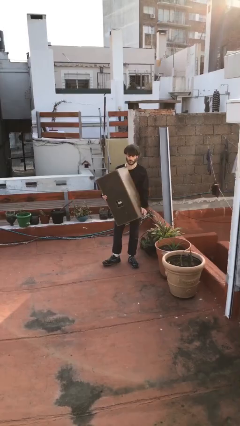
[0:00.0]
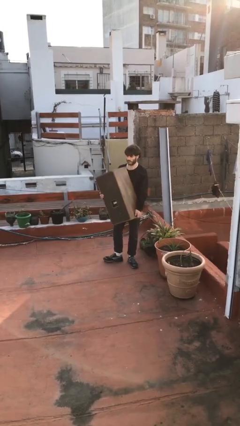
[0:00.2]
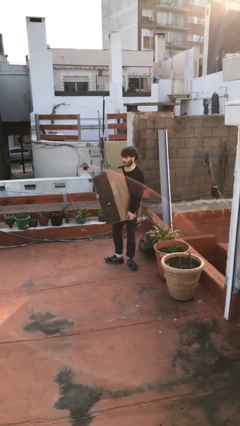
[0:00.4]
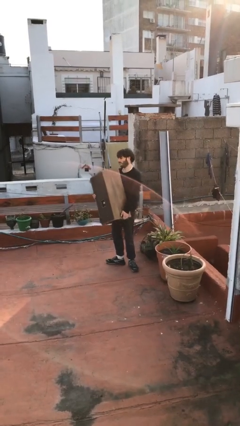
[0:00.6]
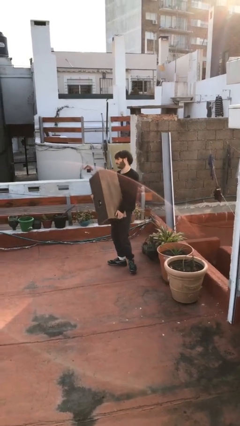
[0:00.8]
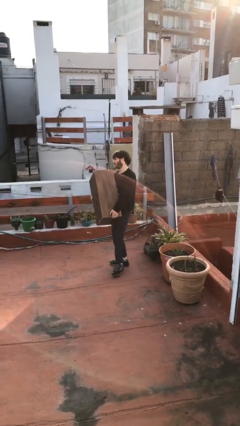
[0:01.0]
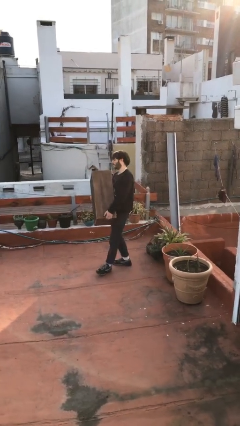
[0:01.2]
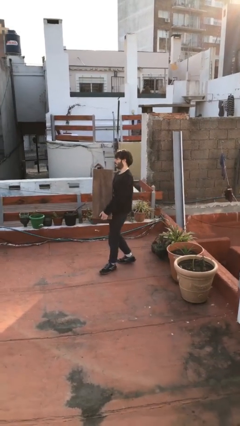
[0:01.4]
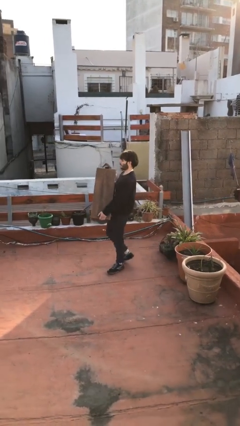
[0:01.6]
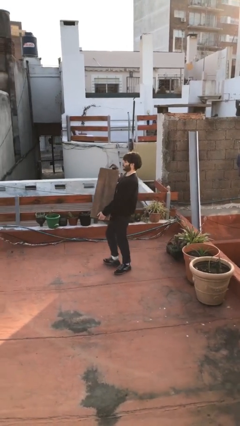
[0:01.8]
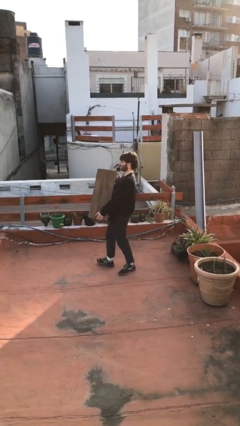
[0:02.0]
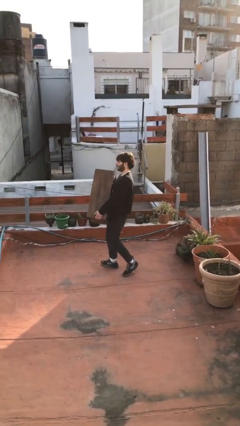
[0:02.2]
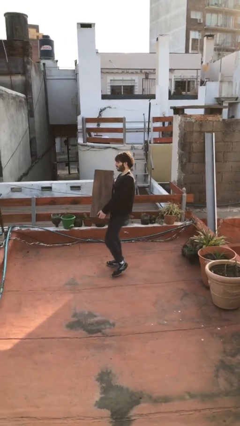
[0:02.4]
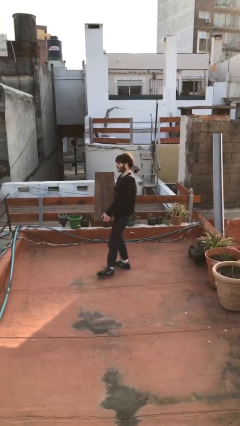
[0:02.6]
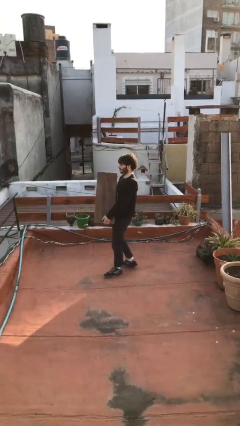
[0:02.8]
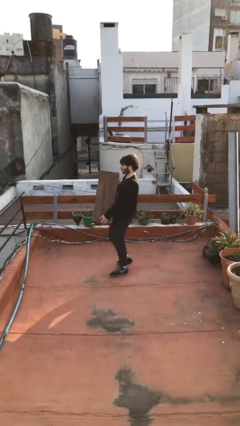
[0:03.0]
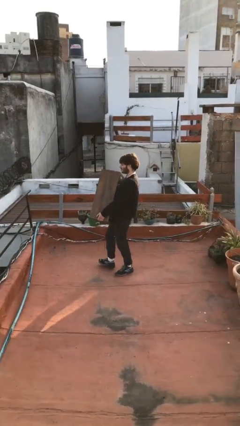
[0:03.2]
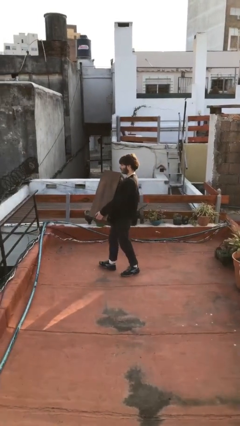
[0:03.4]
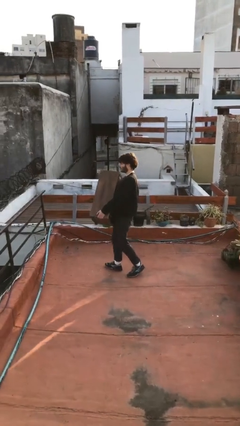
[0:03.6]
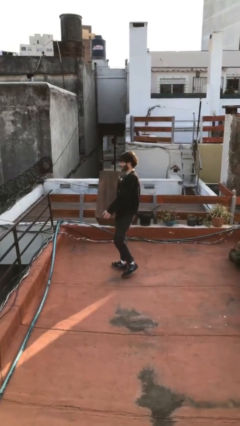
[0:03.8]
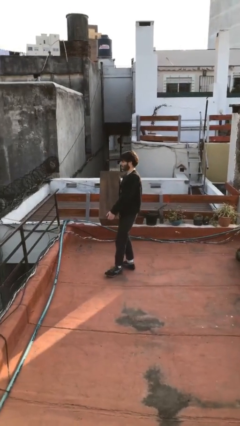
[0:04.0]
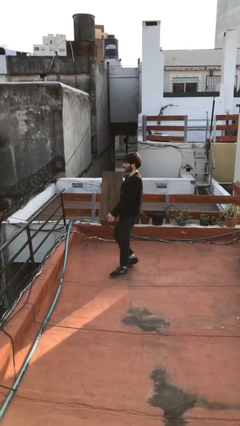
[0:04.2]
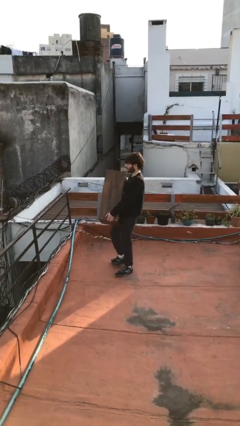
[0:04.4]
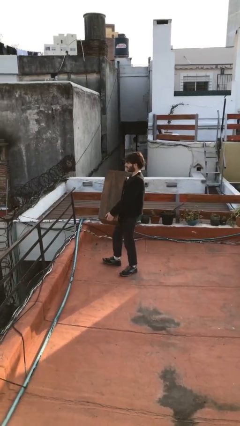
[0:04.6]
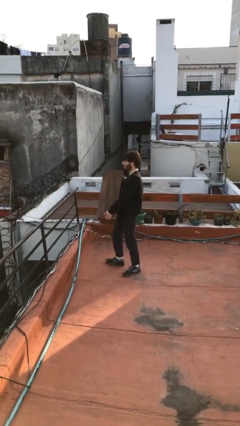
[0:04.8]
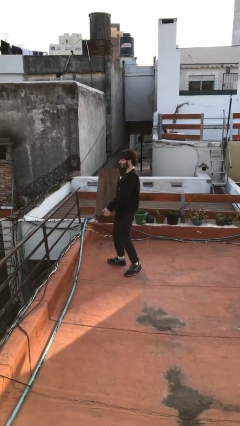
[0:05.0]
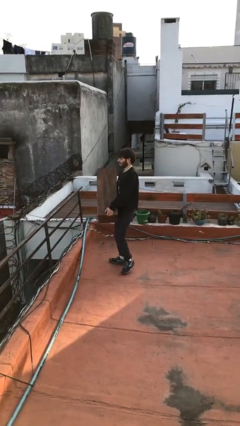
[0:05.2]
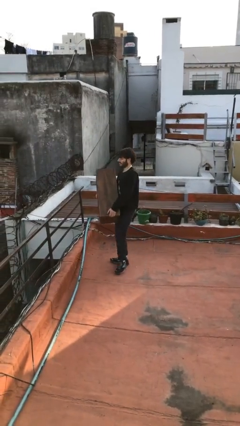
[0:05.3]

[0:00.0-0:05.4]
person carries furniture

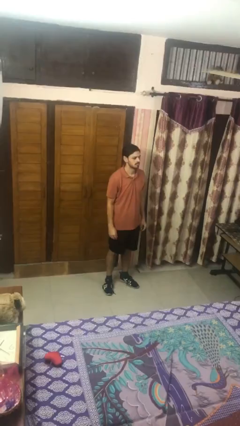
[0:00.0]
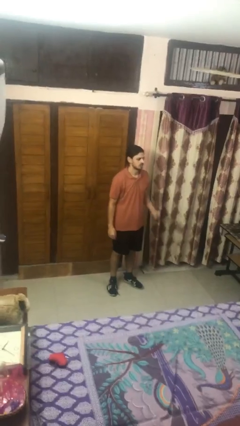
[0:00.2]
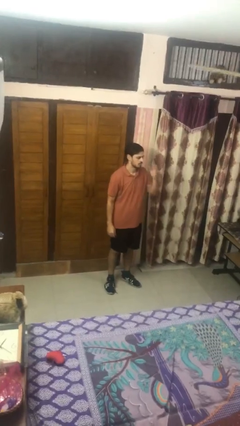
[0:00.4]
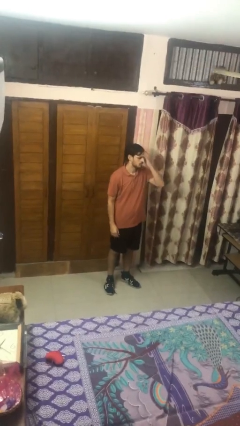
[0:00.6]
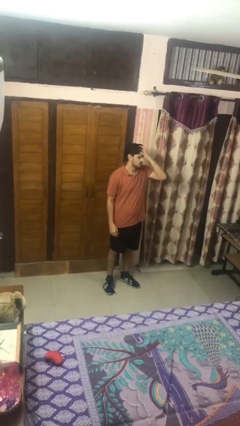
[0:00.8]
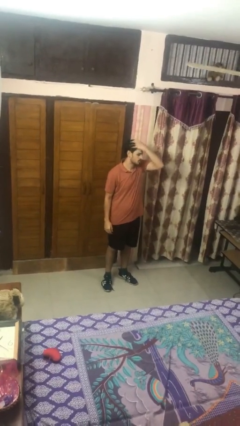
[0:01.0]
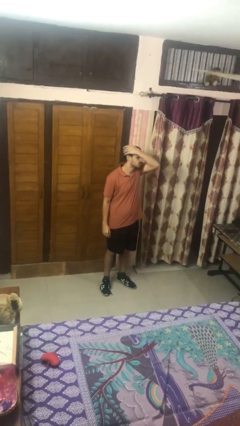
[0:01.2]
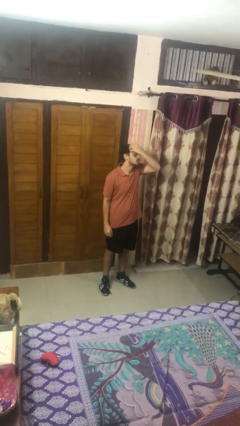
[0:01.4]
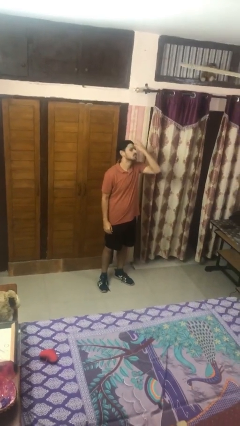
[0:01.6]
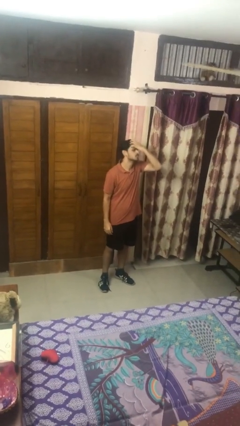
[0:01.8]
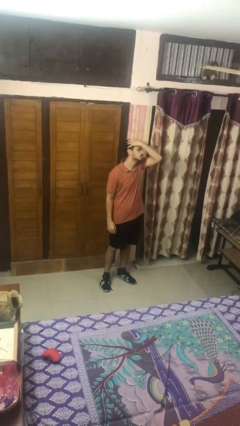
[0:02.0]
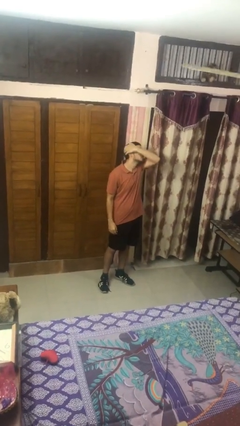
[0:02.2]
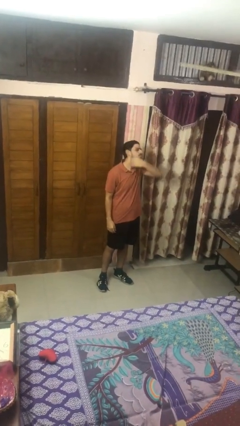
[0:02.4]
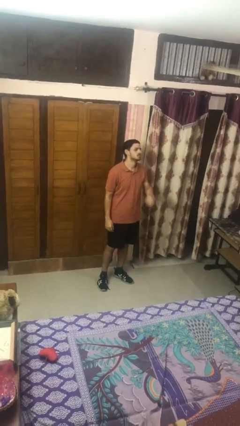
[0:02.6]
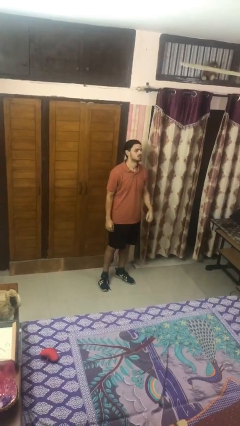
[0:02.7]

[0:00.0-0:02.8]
person strokes hair

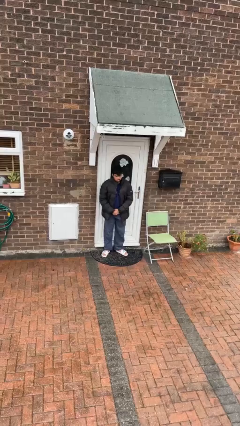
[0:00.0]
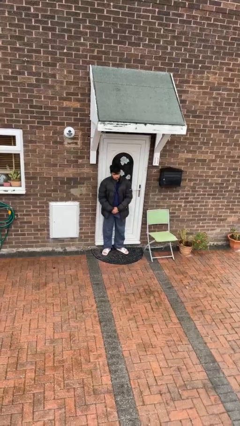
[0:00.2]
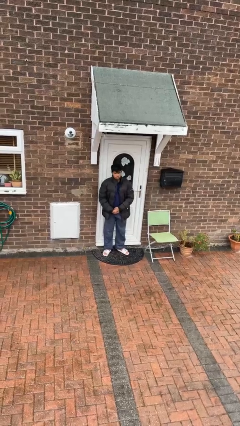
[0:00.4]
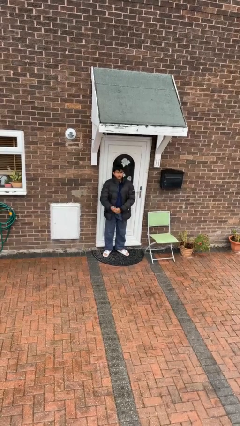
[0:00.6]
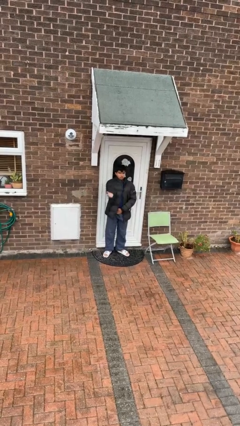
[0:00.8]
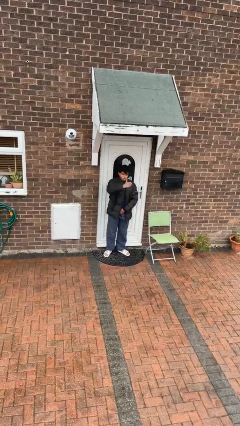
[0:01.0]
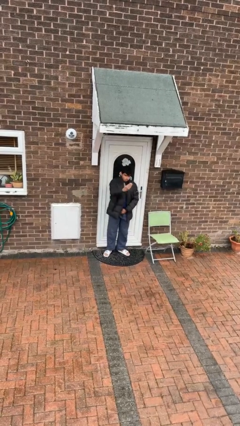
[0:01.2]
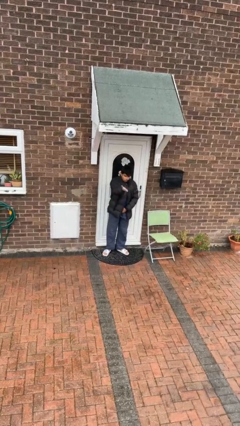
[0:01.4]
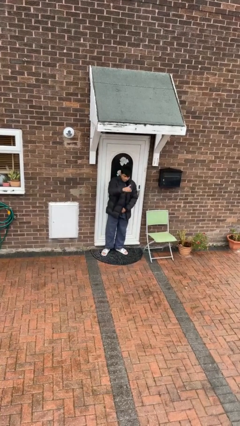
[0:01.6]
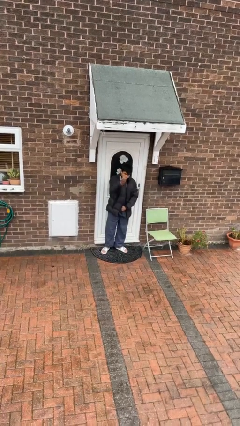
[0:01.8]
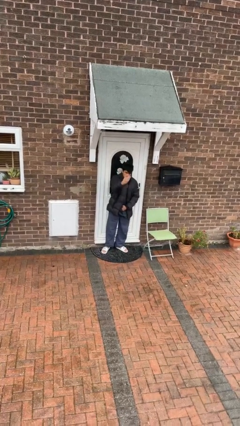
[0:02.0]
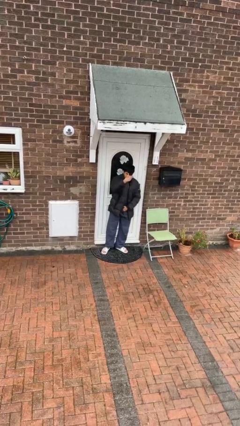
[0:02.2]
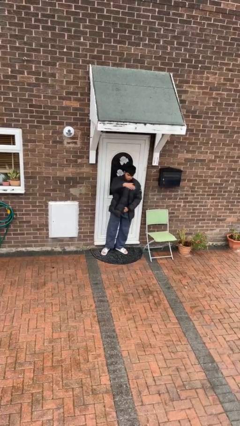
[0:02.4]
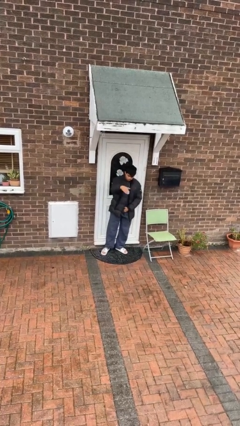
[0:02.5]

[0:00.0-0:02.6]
person gestures come here

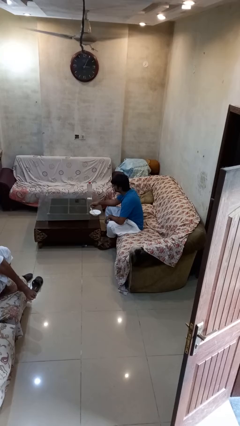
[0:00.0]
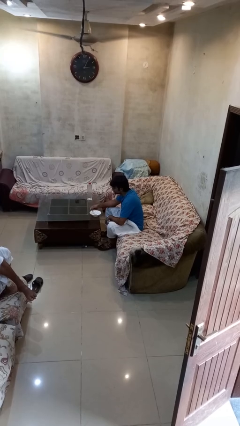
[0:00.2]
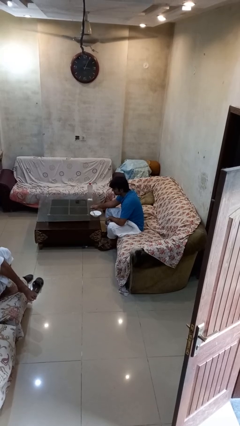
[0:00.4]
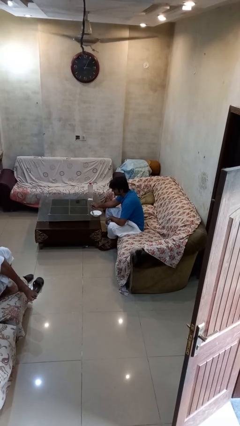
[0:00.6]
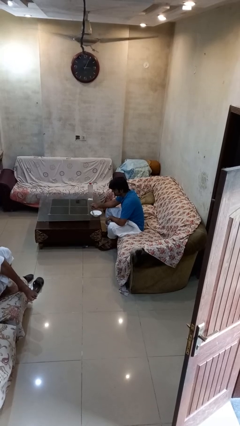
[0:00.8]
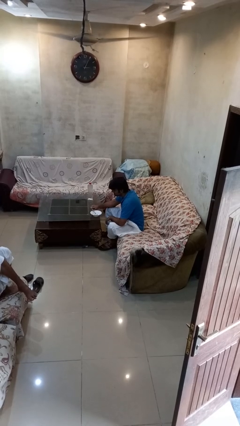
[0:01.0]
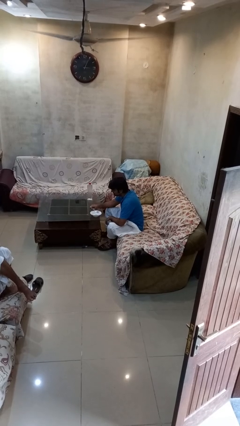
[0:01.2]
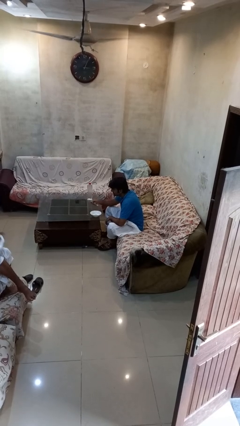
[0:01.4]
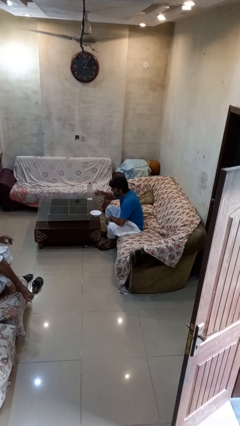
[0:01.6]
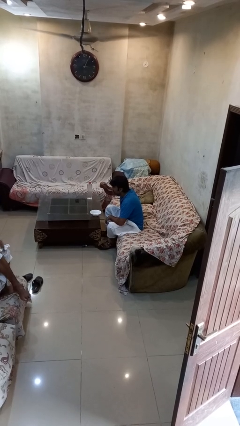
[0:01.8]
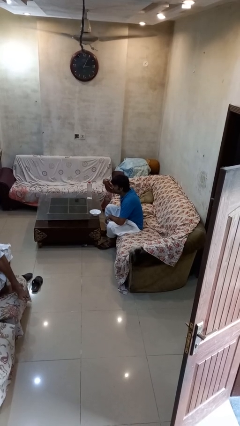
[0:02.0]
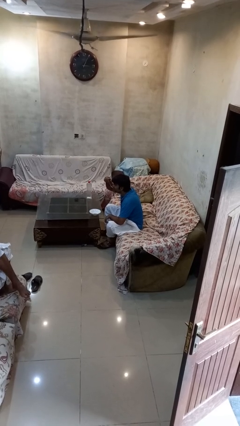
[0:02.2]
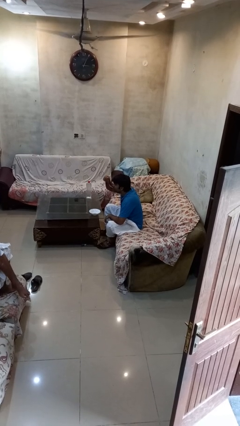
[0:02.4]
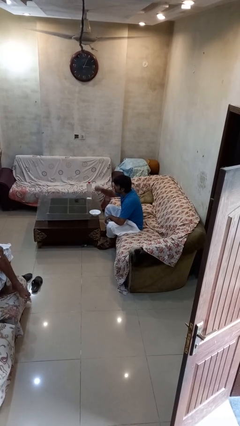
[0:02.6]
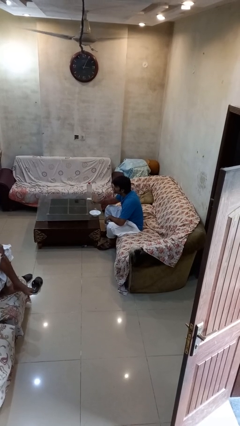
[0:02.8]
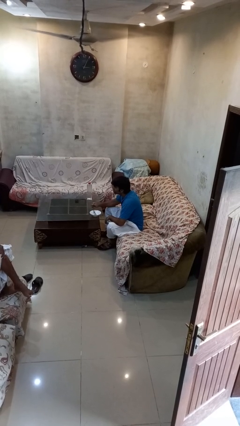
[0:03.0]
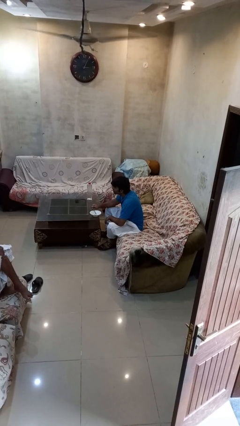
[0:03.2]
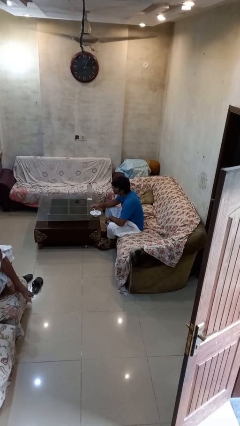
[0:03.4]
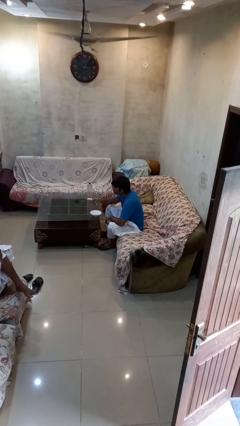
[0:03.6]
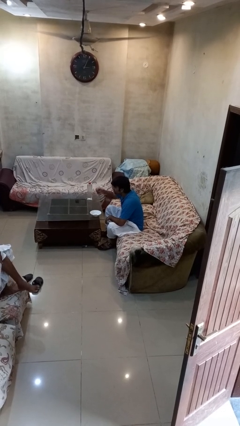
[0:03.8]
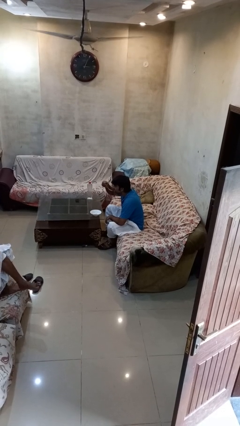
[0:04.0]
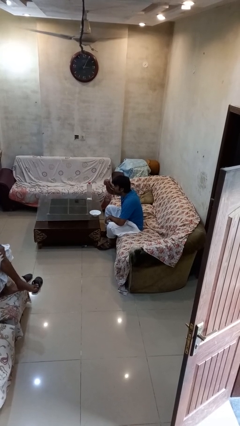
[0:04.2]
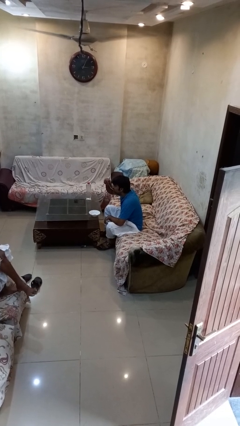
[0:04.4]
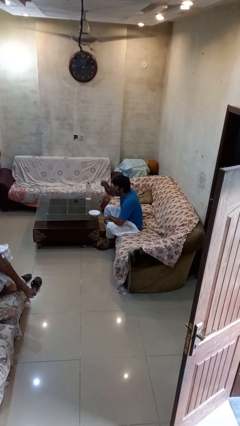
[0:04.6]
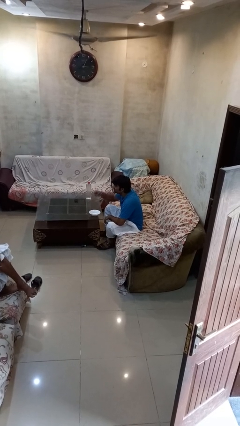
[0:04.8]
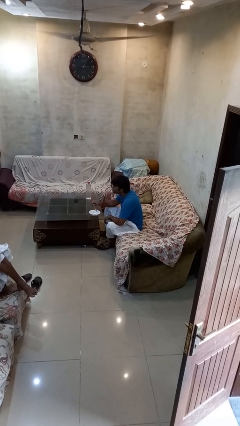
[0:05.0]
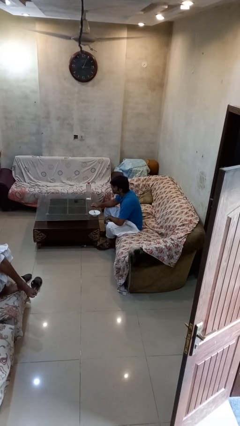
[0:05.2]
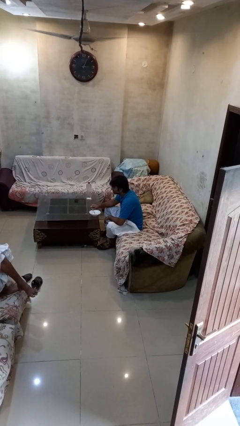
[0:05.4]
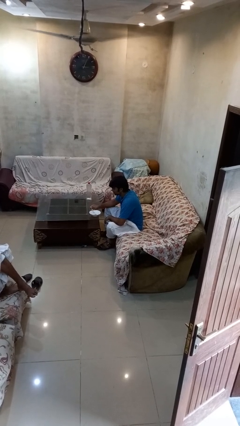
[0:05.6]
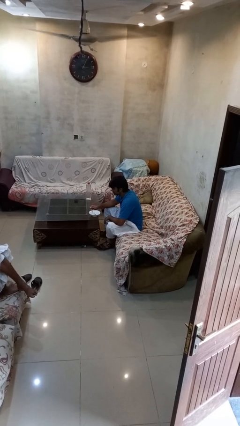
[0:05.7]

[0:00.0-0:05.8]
person eats with utensil

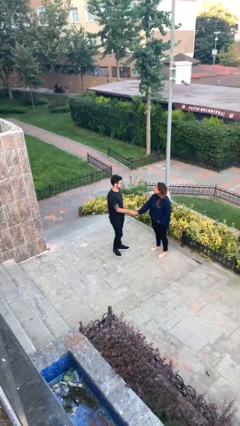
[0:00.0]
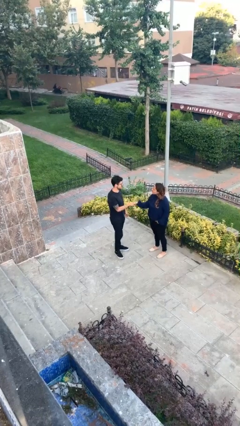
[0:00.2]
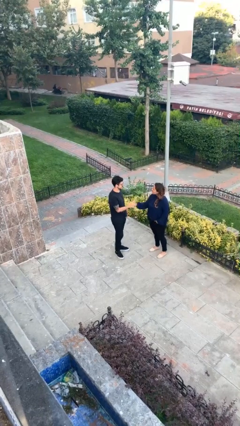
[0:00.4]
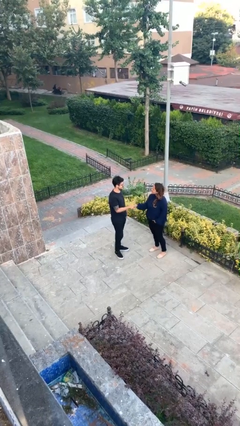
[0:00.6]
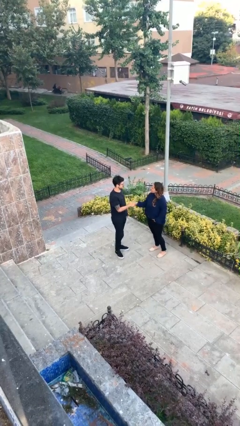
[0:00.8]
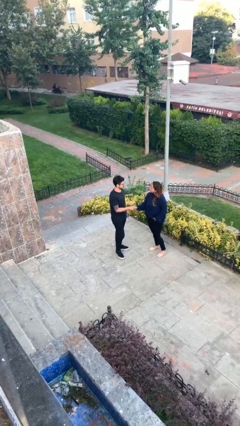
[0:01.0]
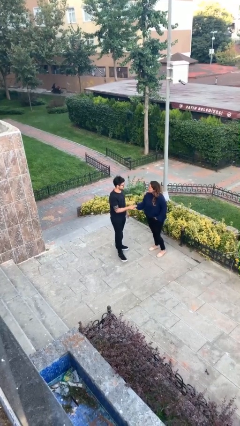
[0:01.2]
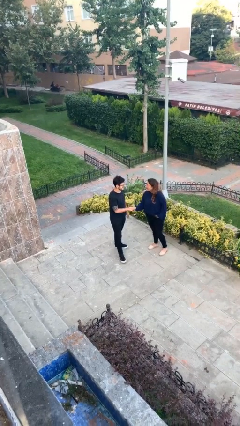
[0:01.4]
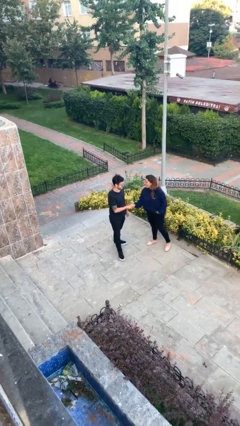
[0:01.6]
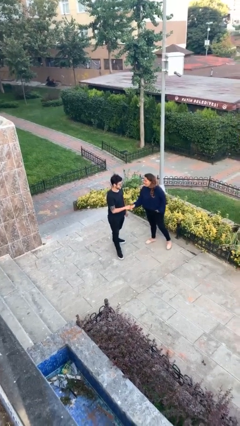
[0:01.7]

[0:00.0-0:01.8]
person shakes hand
